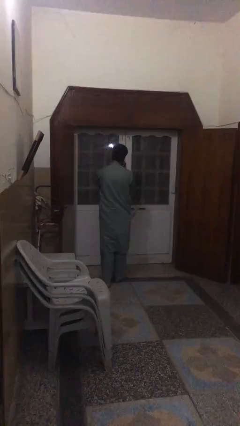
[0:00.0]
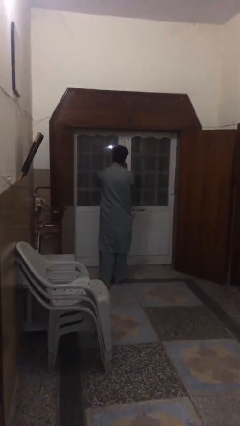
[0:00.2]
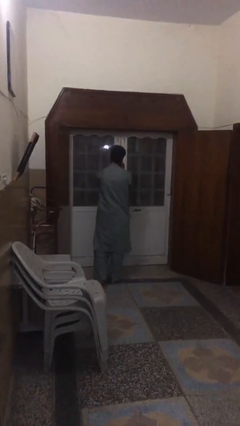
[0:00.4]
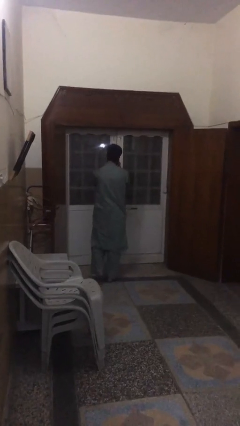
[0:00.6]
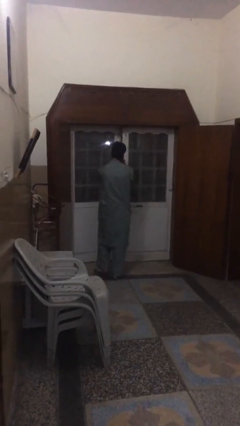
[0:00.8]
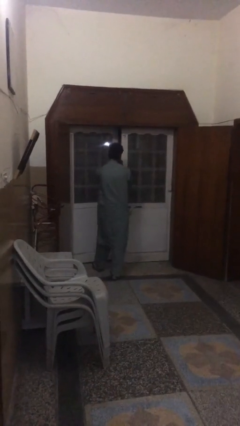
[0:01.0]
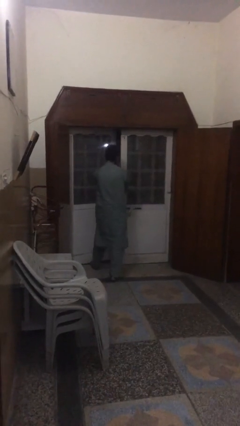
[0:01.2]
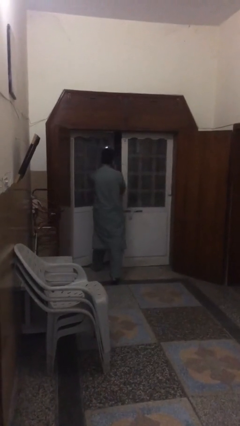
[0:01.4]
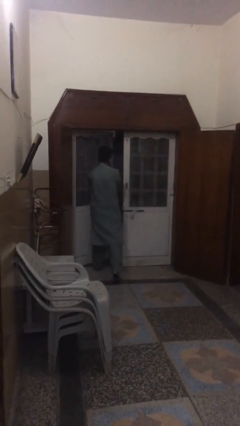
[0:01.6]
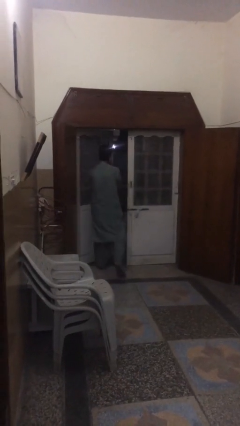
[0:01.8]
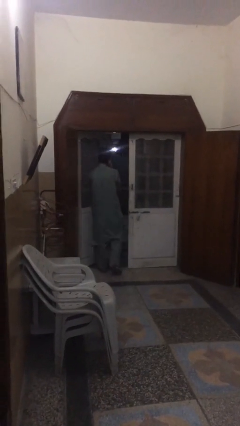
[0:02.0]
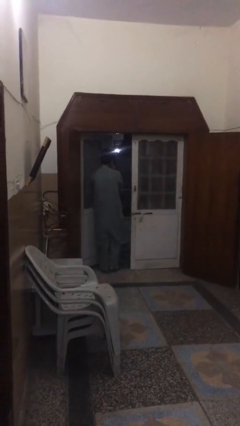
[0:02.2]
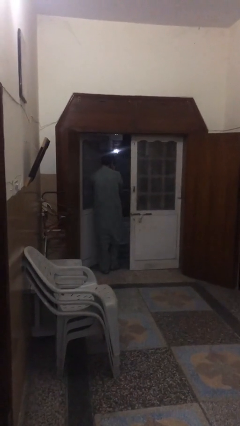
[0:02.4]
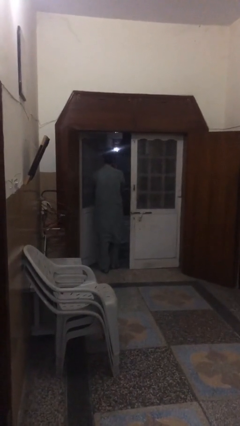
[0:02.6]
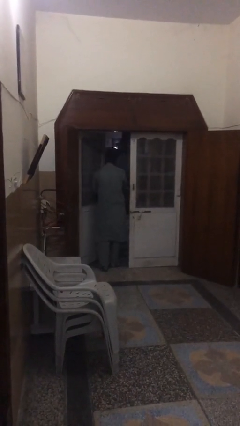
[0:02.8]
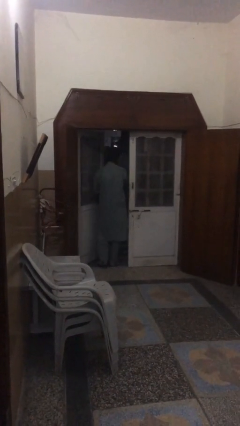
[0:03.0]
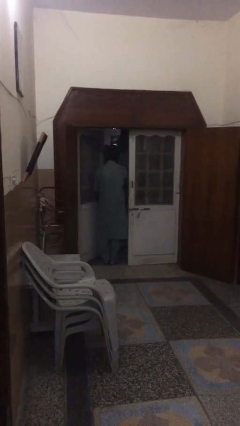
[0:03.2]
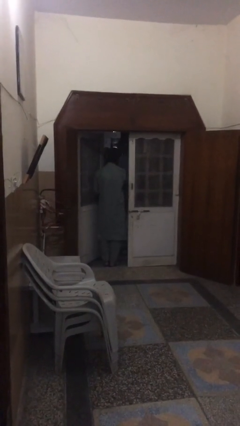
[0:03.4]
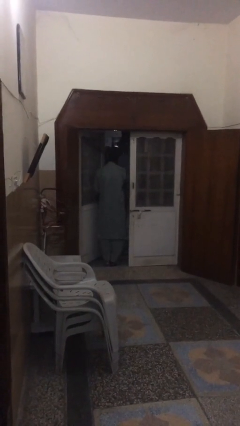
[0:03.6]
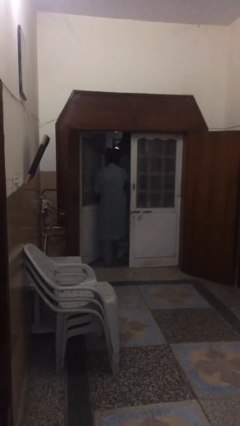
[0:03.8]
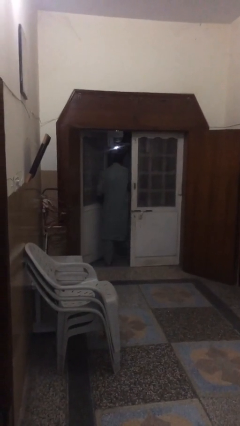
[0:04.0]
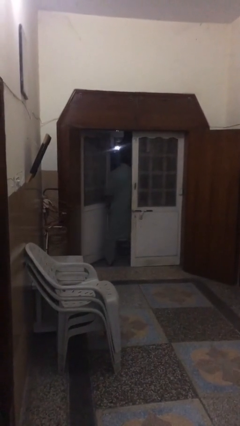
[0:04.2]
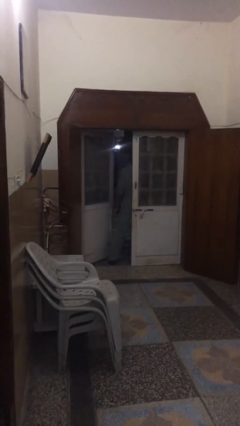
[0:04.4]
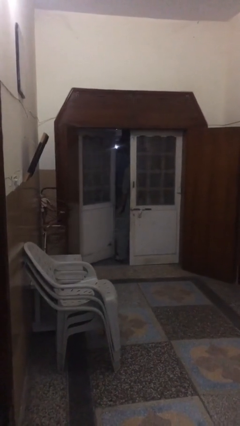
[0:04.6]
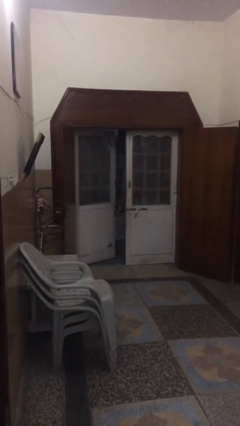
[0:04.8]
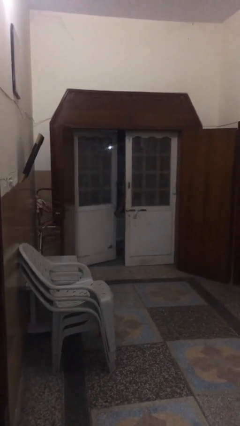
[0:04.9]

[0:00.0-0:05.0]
person opens facility door

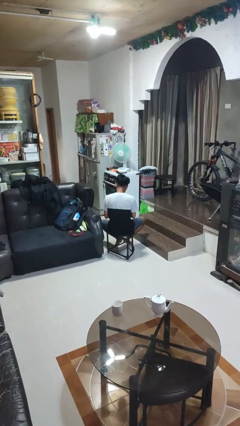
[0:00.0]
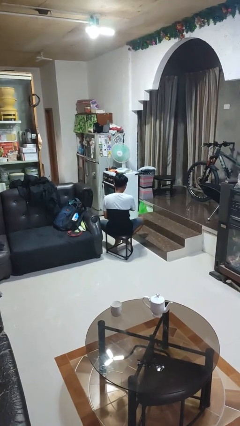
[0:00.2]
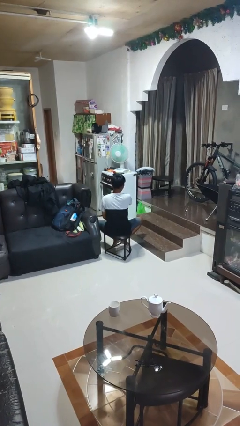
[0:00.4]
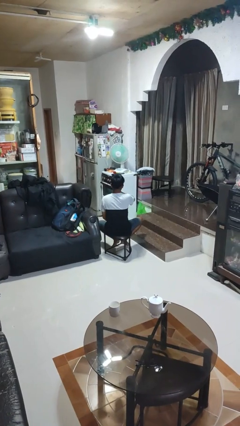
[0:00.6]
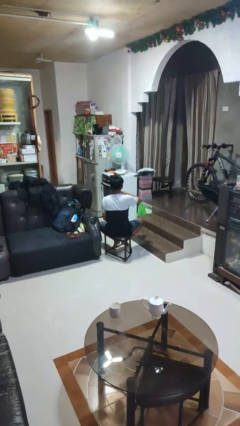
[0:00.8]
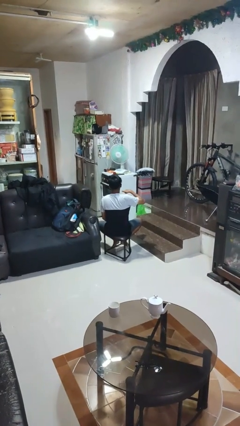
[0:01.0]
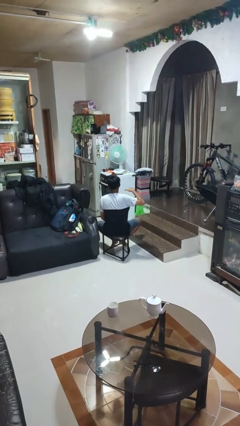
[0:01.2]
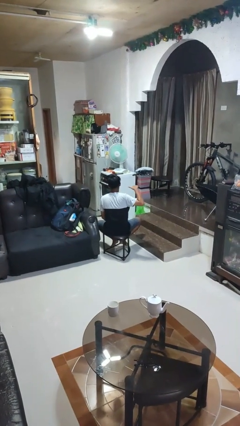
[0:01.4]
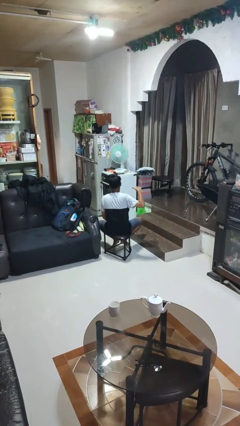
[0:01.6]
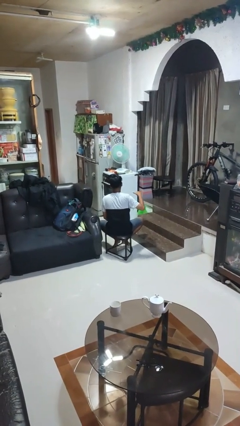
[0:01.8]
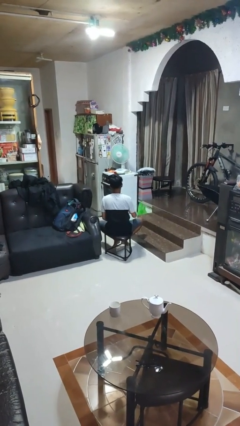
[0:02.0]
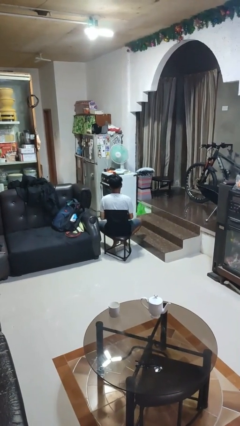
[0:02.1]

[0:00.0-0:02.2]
person gestures cut

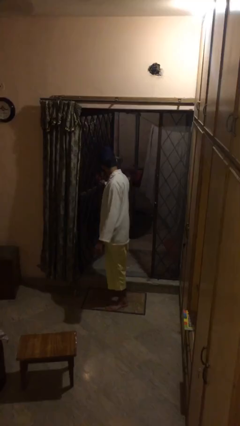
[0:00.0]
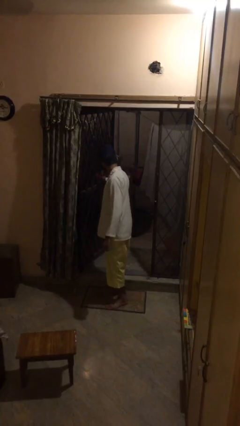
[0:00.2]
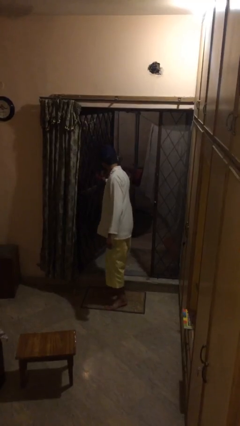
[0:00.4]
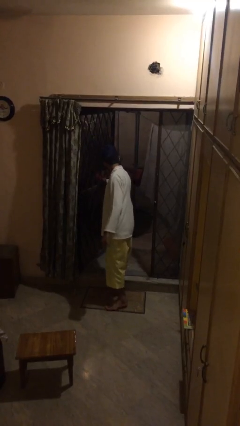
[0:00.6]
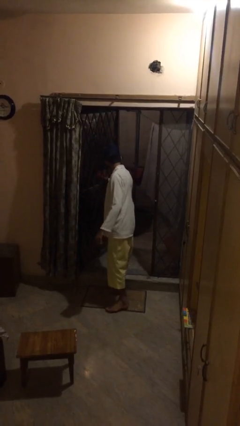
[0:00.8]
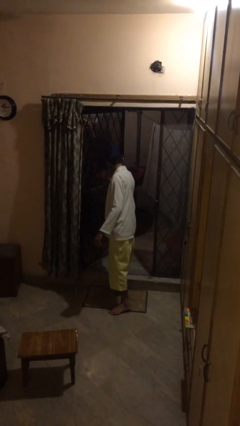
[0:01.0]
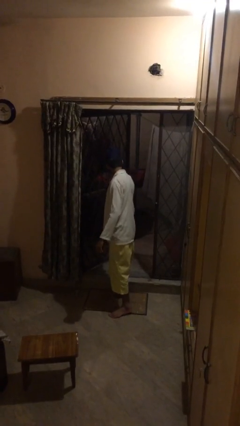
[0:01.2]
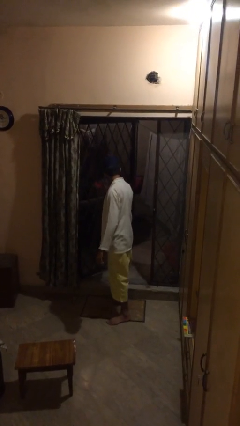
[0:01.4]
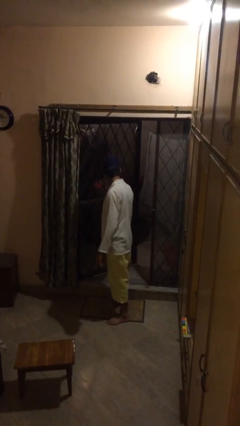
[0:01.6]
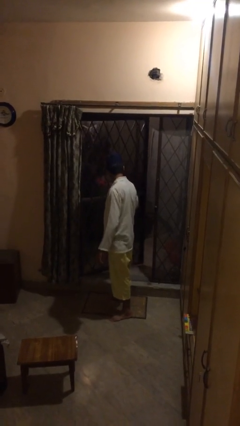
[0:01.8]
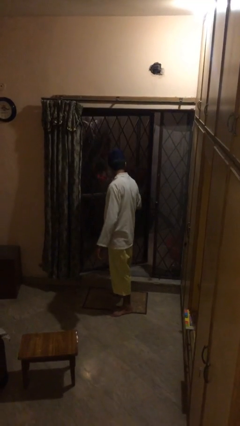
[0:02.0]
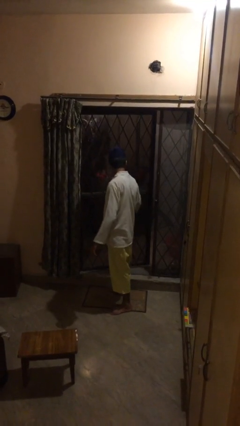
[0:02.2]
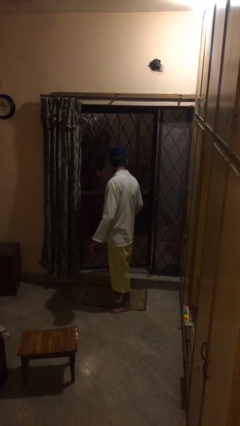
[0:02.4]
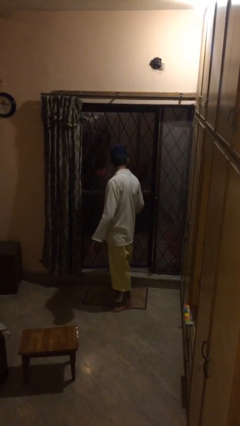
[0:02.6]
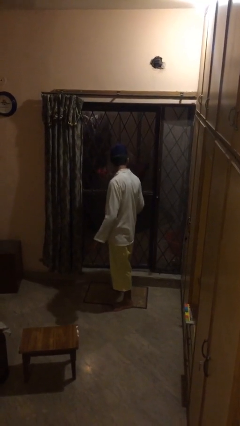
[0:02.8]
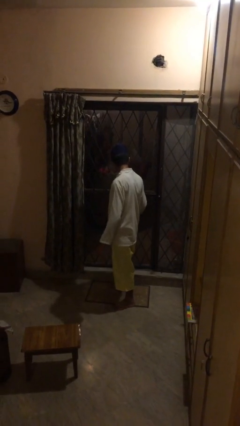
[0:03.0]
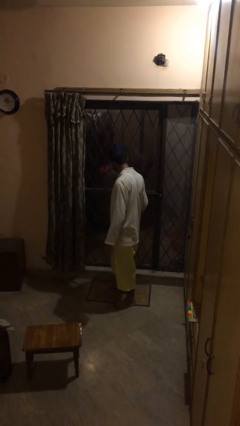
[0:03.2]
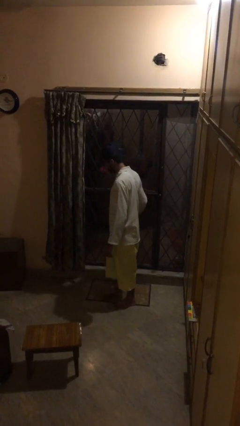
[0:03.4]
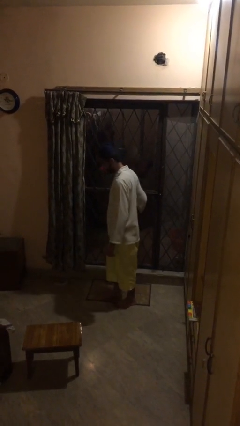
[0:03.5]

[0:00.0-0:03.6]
person closes facility door

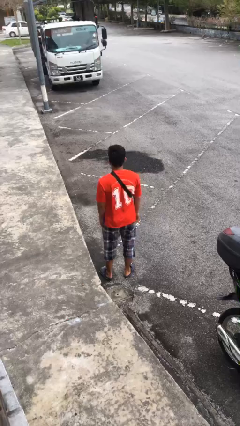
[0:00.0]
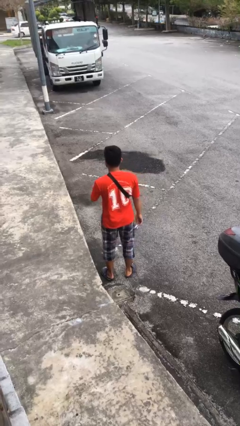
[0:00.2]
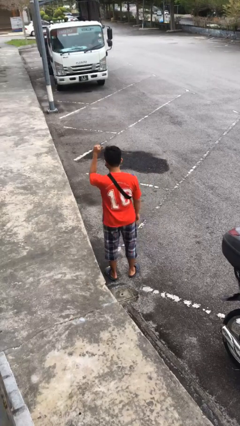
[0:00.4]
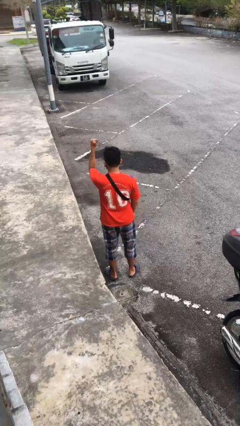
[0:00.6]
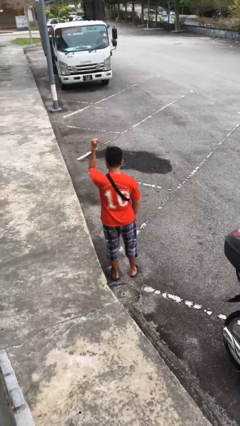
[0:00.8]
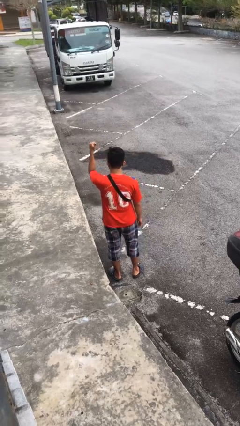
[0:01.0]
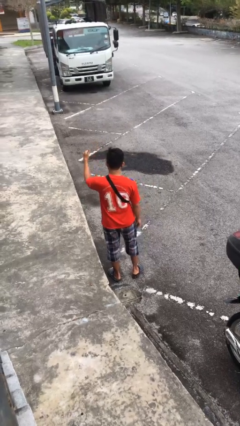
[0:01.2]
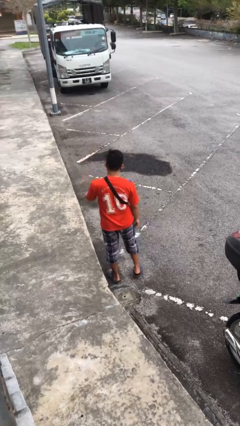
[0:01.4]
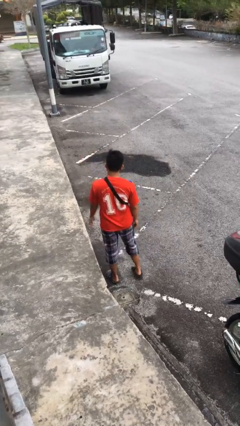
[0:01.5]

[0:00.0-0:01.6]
person gestures thumbs up

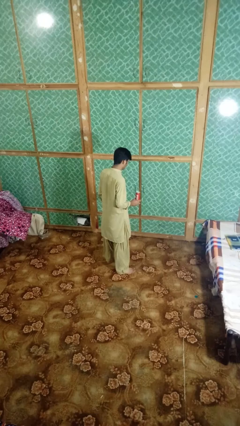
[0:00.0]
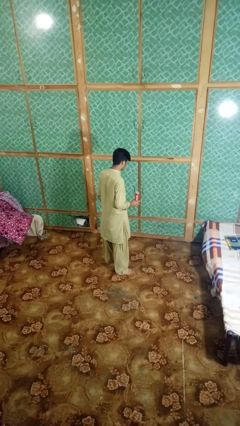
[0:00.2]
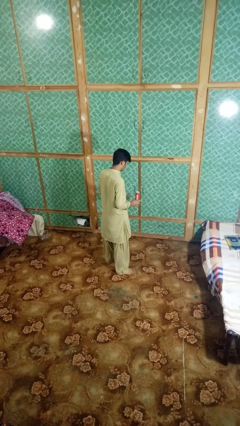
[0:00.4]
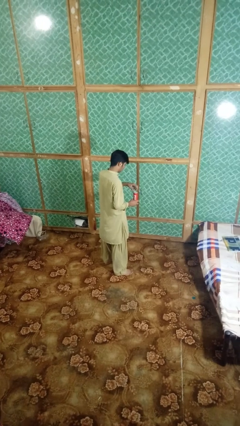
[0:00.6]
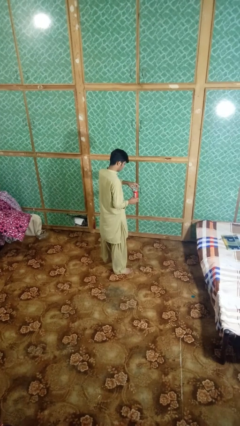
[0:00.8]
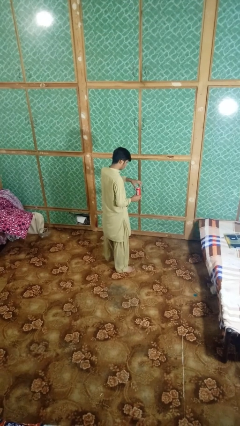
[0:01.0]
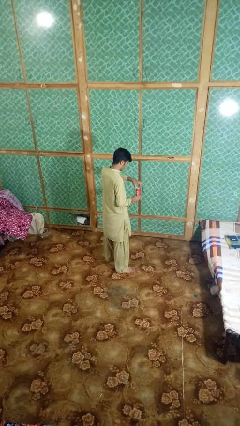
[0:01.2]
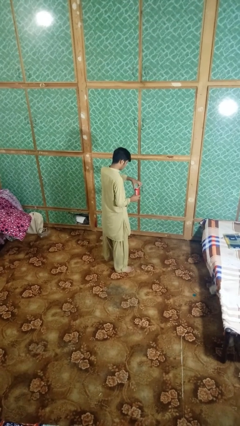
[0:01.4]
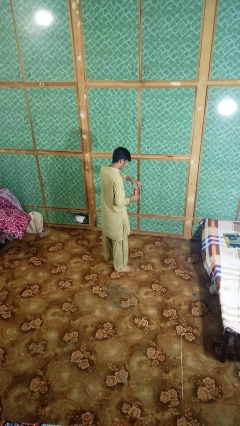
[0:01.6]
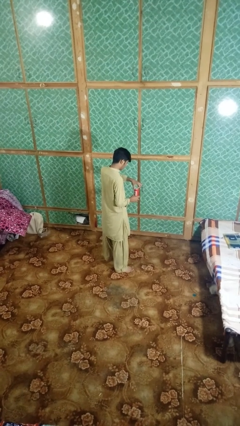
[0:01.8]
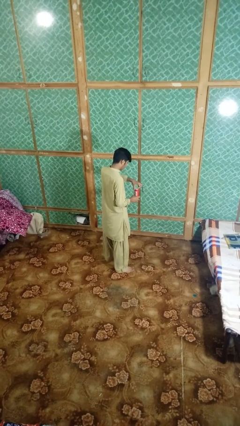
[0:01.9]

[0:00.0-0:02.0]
person opens can with can opener

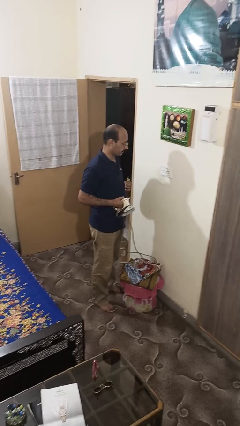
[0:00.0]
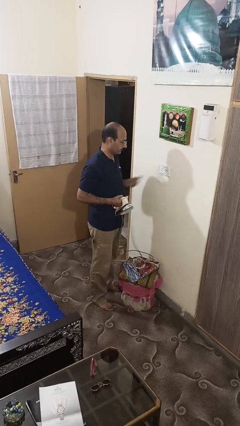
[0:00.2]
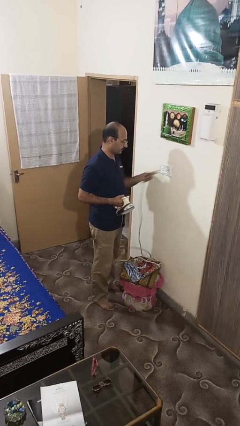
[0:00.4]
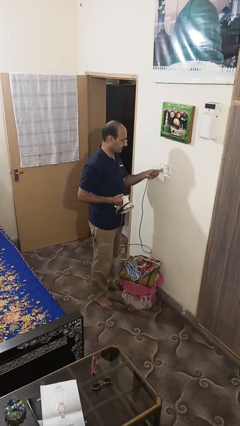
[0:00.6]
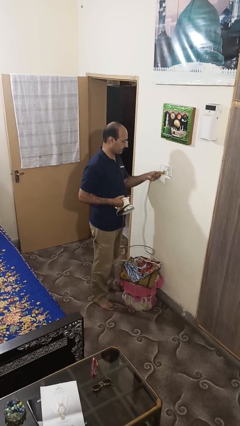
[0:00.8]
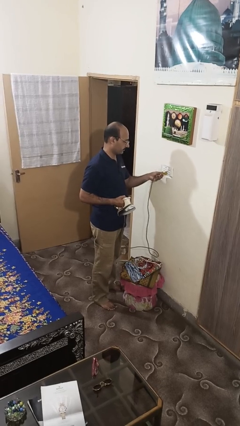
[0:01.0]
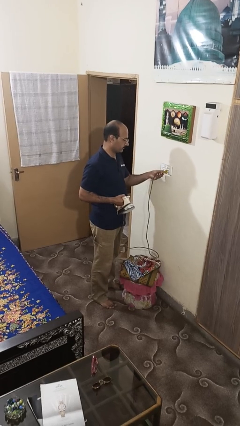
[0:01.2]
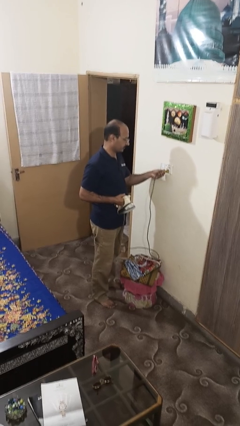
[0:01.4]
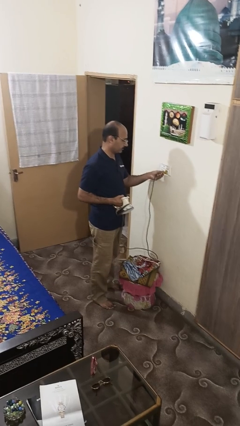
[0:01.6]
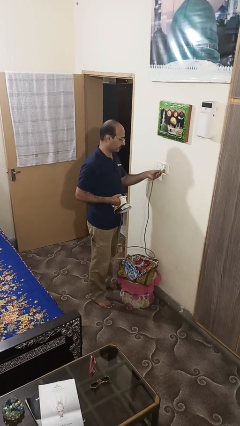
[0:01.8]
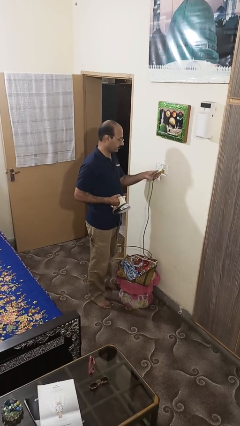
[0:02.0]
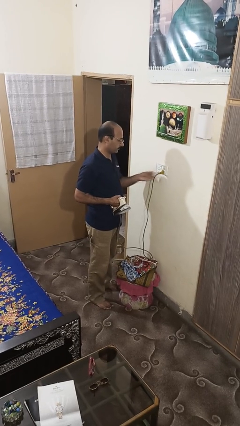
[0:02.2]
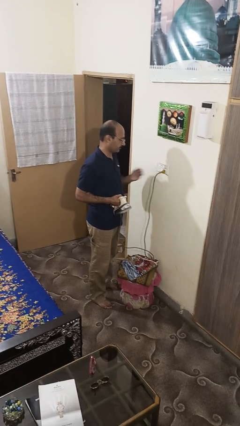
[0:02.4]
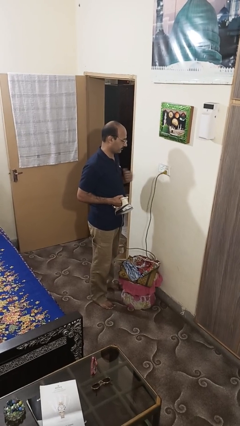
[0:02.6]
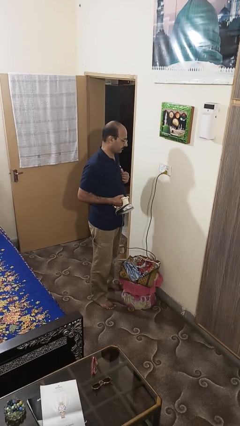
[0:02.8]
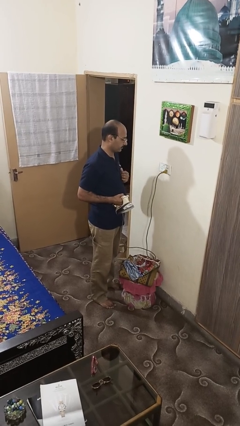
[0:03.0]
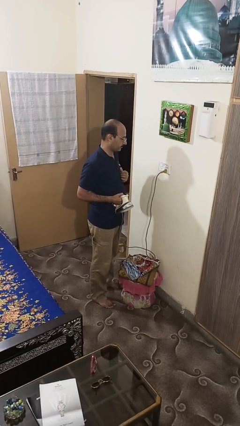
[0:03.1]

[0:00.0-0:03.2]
person plugs into electrical socket
